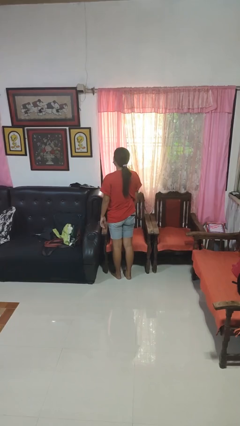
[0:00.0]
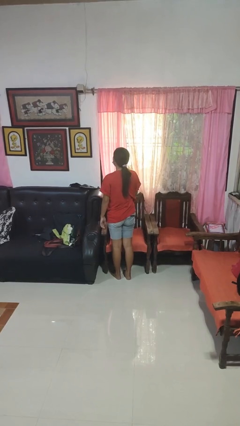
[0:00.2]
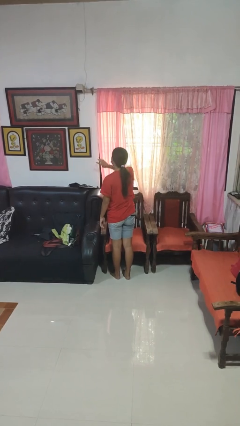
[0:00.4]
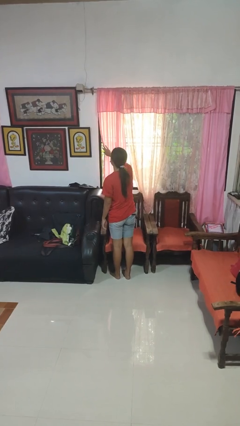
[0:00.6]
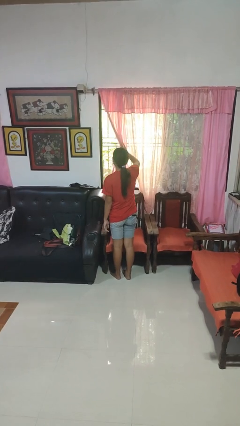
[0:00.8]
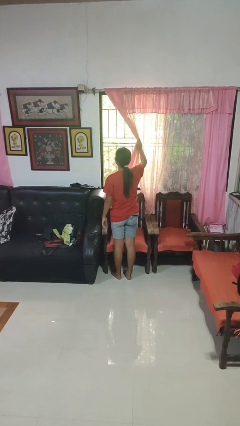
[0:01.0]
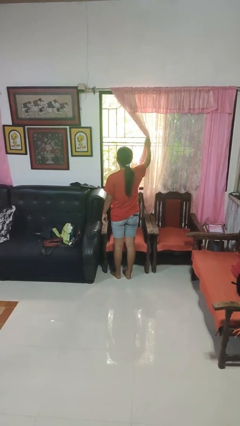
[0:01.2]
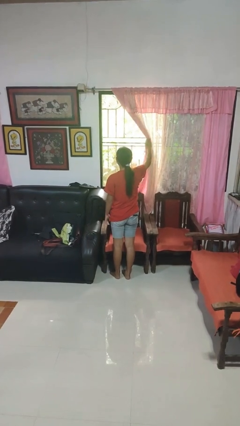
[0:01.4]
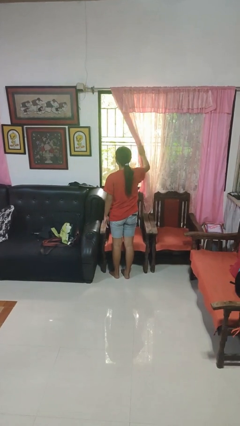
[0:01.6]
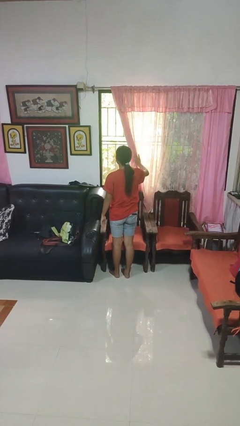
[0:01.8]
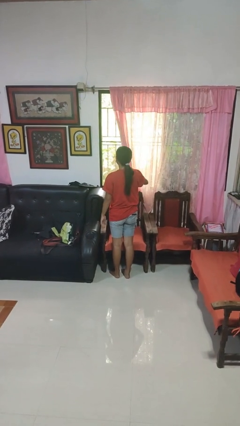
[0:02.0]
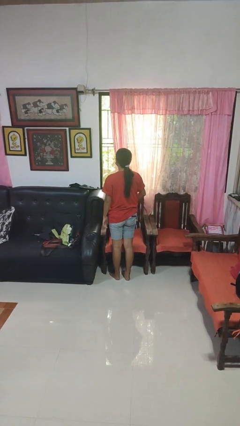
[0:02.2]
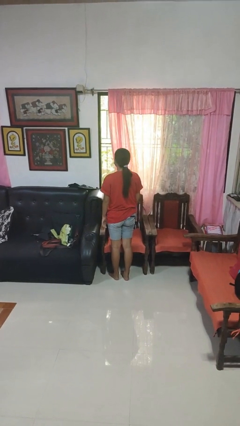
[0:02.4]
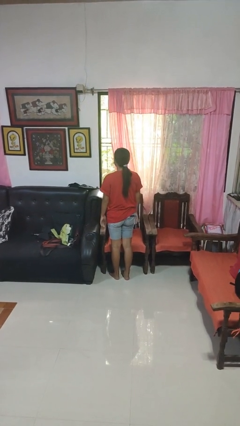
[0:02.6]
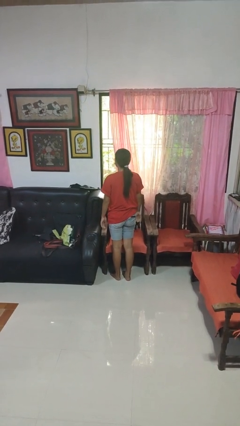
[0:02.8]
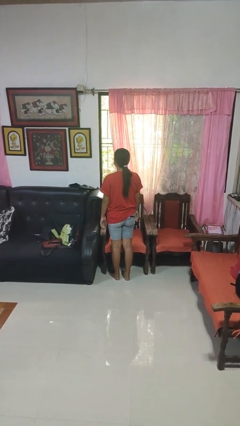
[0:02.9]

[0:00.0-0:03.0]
person opens curtains

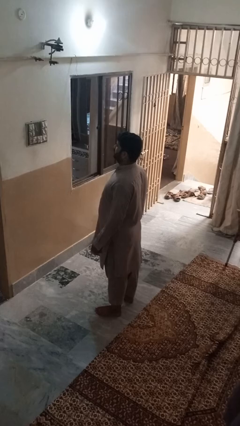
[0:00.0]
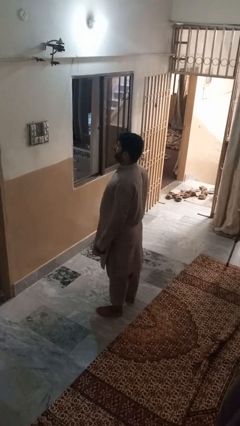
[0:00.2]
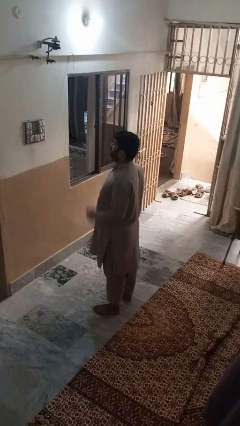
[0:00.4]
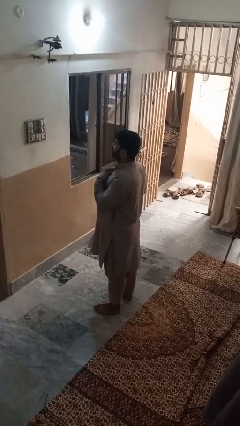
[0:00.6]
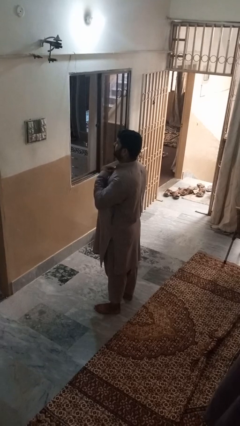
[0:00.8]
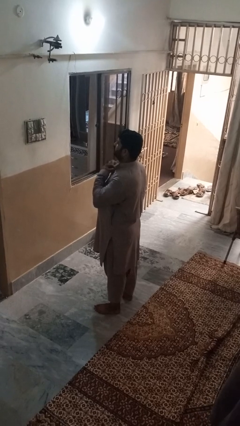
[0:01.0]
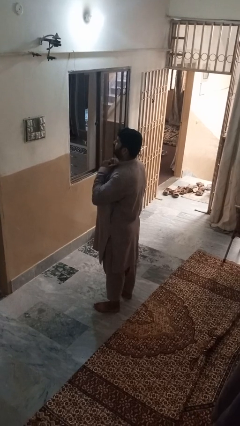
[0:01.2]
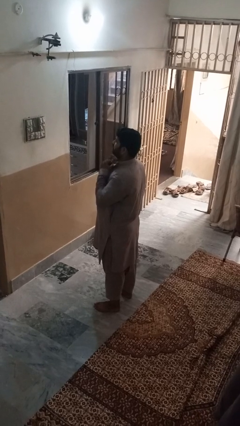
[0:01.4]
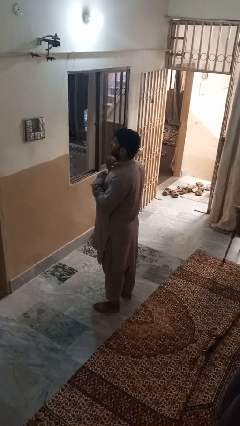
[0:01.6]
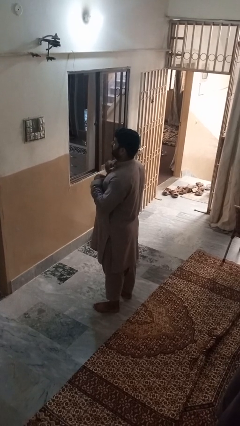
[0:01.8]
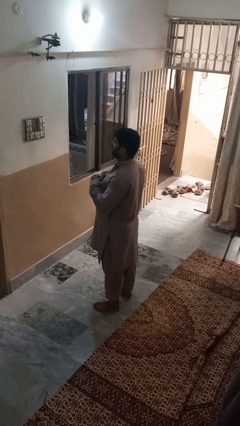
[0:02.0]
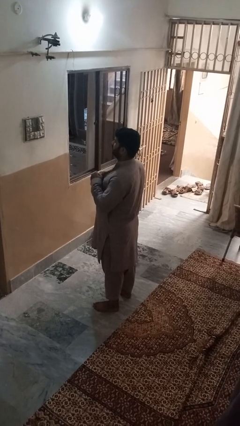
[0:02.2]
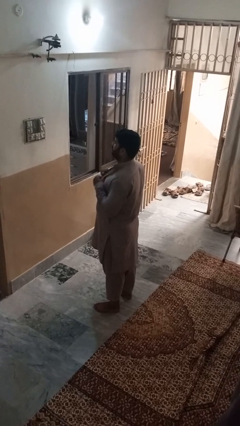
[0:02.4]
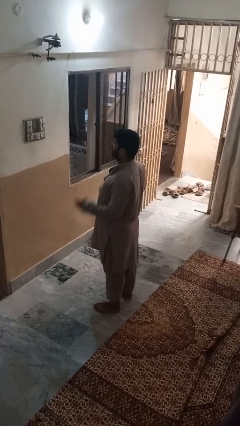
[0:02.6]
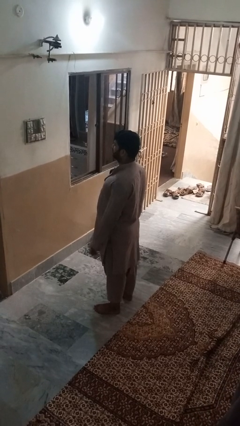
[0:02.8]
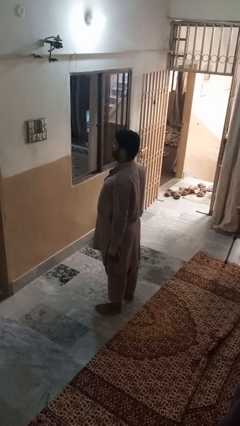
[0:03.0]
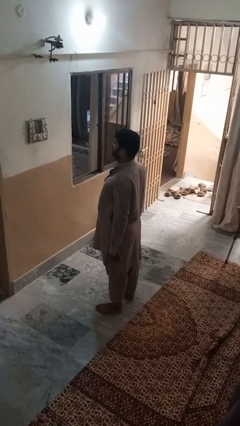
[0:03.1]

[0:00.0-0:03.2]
person unbuttons shirt

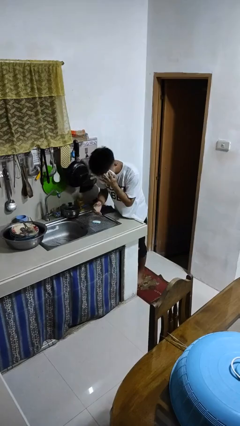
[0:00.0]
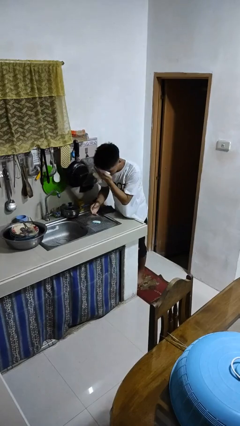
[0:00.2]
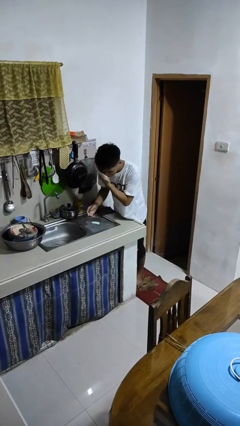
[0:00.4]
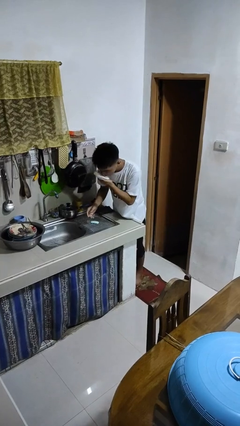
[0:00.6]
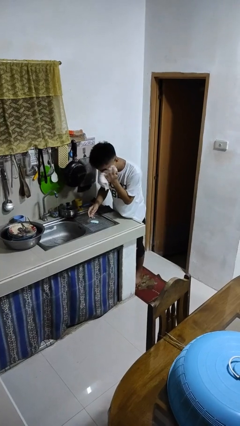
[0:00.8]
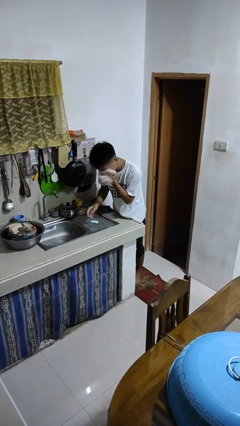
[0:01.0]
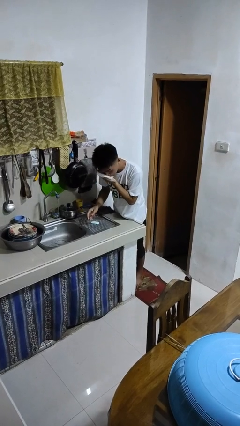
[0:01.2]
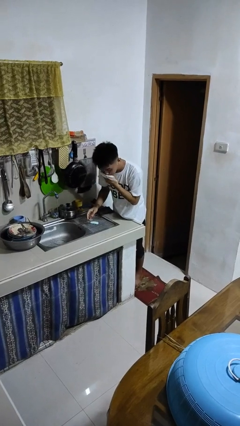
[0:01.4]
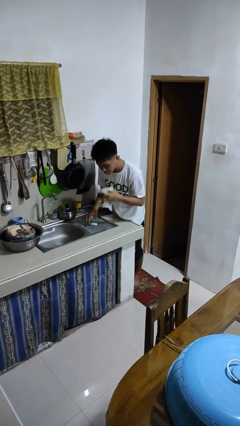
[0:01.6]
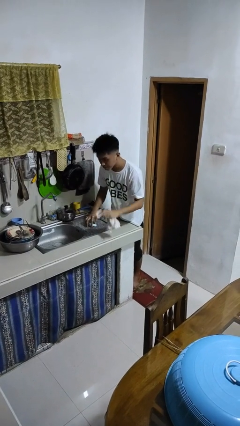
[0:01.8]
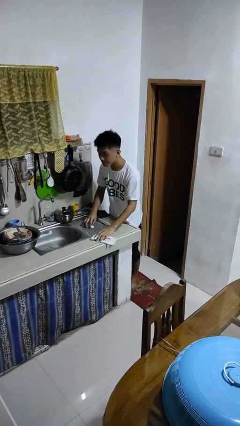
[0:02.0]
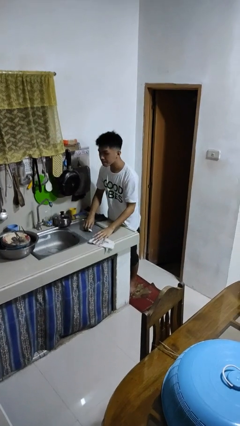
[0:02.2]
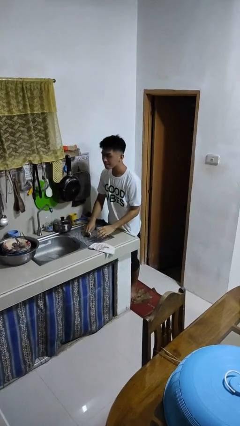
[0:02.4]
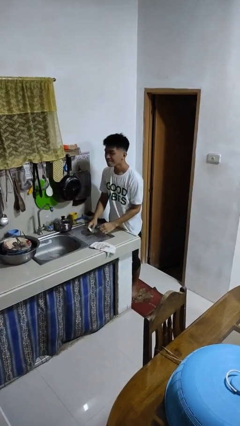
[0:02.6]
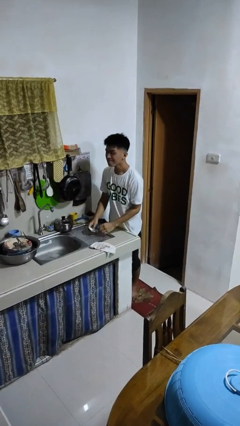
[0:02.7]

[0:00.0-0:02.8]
person dries face with towel

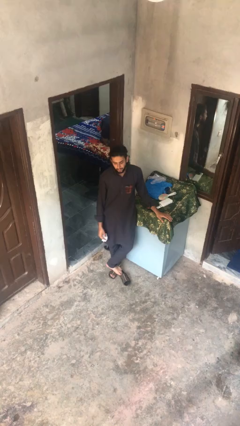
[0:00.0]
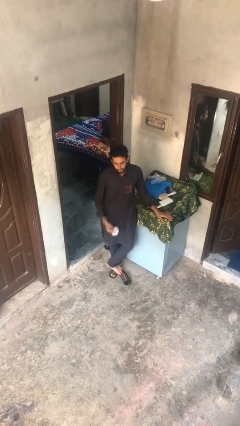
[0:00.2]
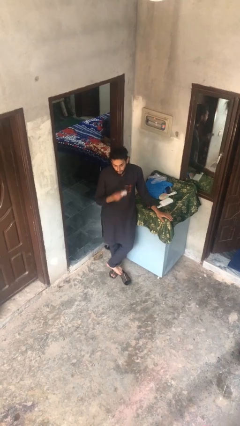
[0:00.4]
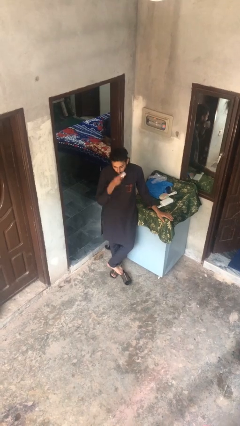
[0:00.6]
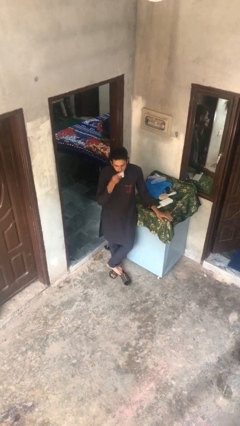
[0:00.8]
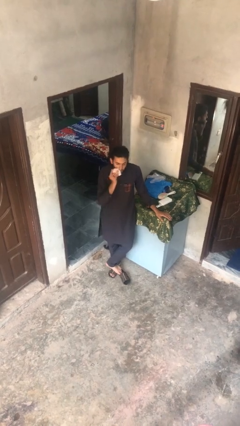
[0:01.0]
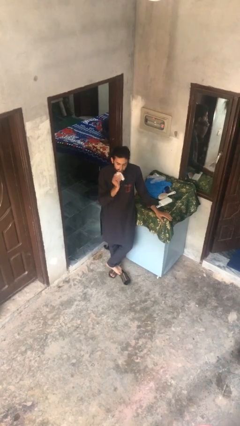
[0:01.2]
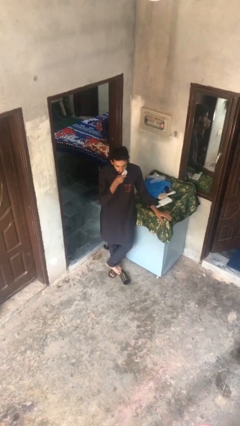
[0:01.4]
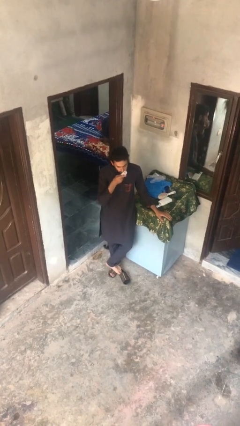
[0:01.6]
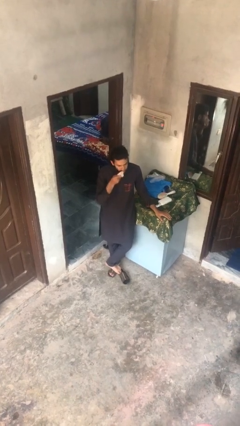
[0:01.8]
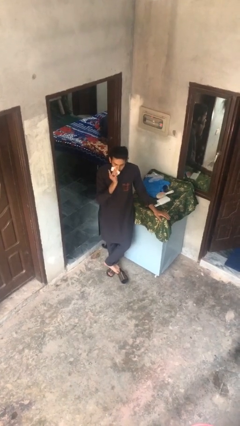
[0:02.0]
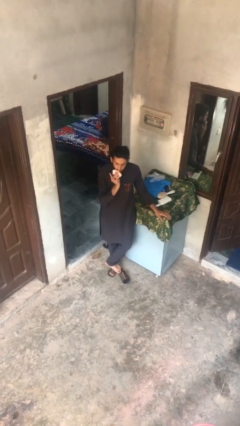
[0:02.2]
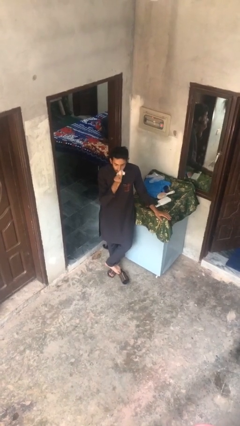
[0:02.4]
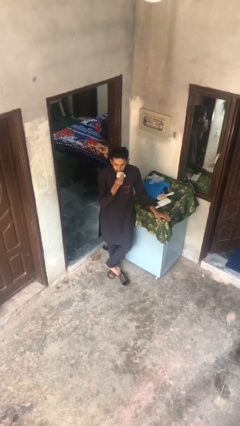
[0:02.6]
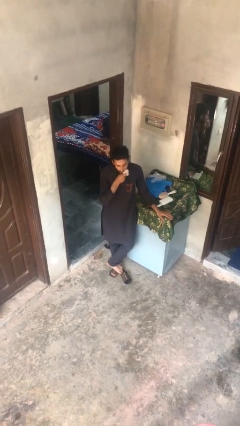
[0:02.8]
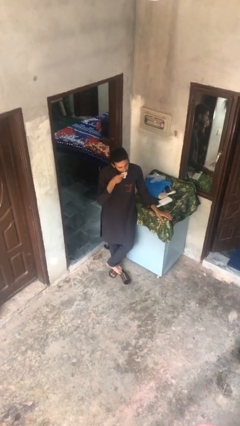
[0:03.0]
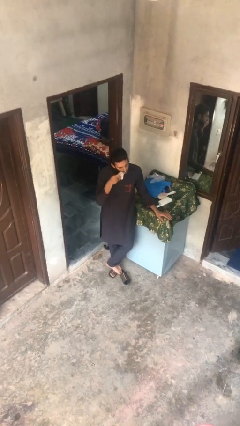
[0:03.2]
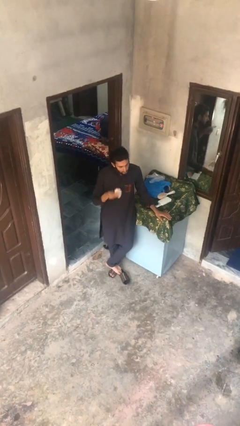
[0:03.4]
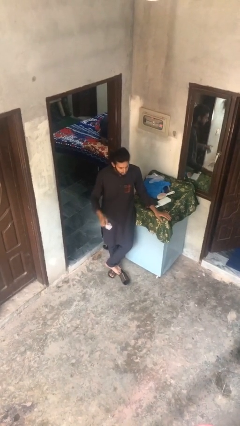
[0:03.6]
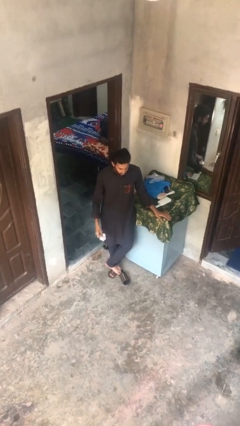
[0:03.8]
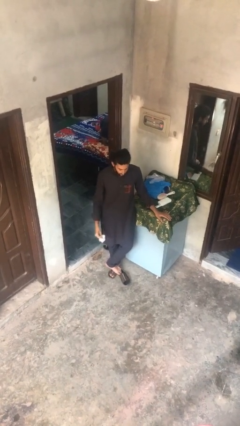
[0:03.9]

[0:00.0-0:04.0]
person wipes mouth with napkin

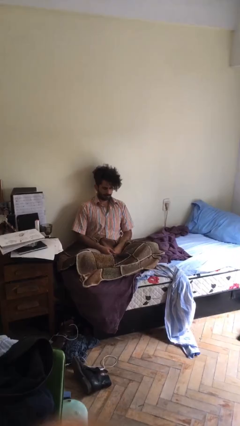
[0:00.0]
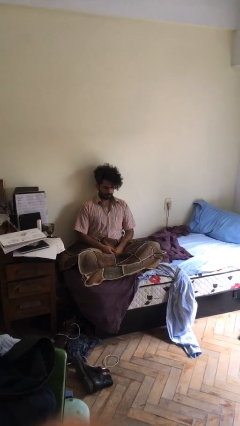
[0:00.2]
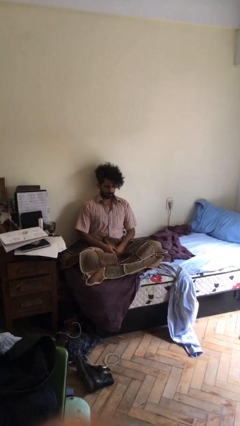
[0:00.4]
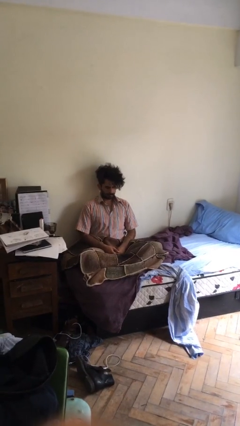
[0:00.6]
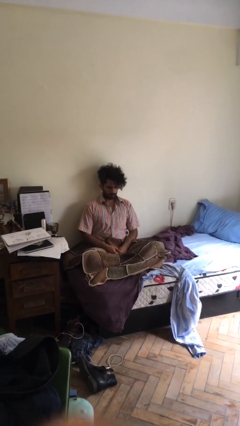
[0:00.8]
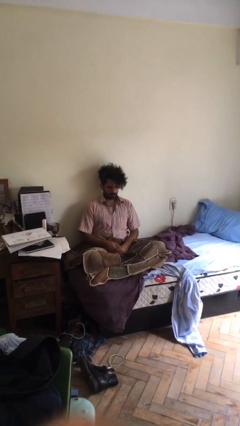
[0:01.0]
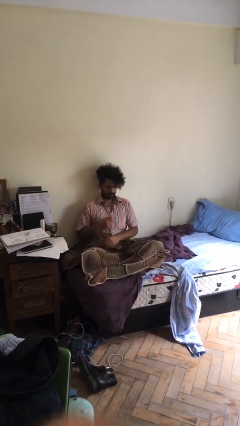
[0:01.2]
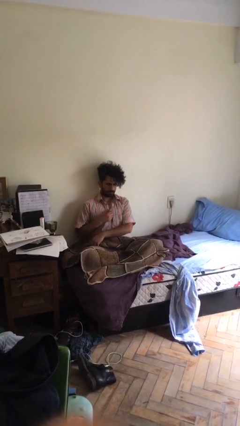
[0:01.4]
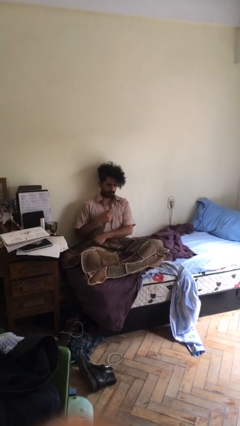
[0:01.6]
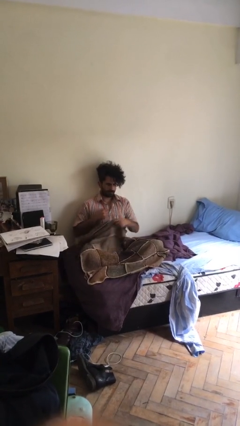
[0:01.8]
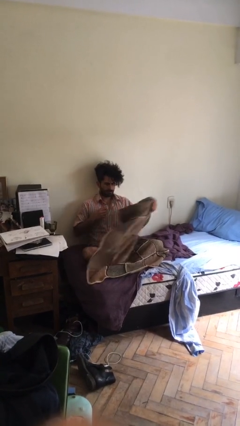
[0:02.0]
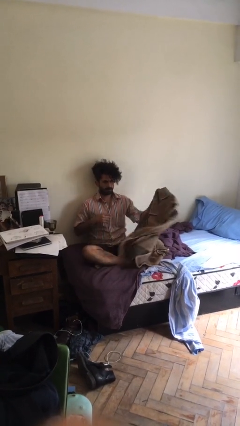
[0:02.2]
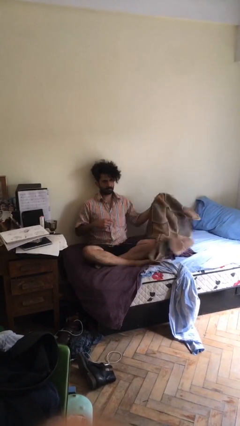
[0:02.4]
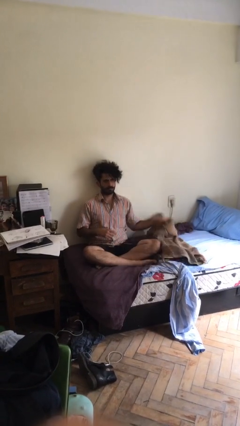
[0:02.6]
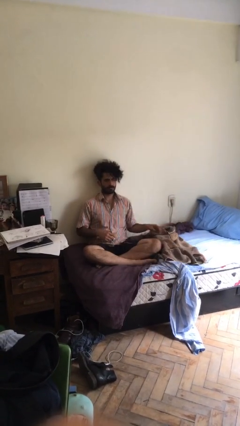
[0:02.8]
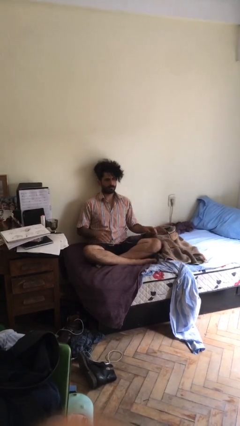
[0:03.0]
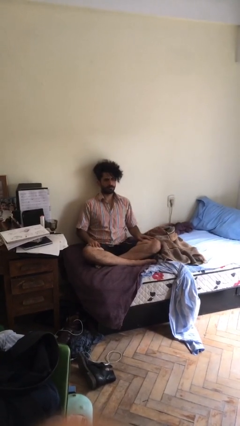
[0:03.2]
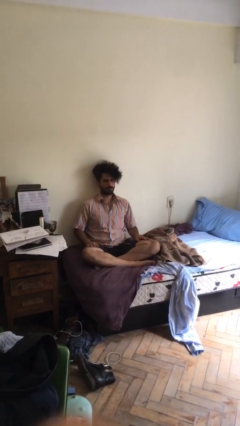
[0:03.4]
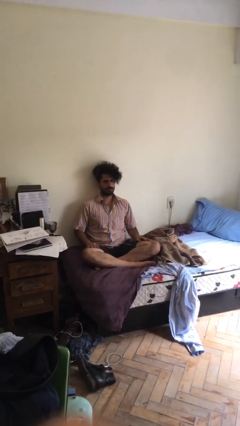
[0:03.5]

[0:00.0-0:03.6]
person uncovers with blanket

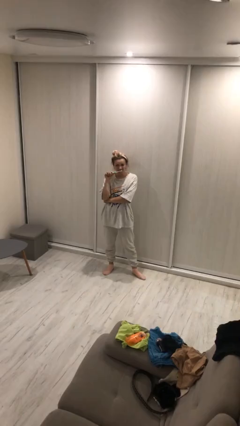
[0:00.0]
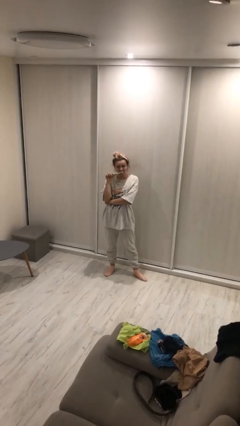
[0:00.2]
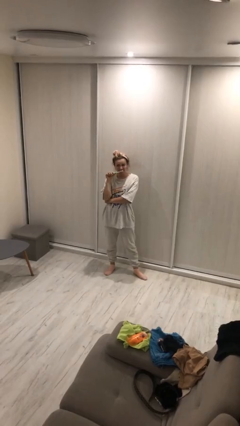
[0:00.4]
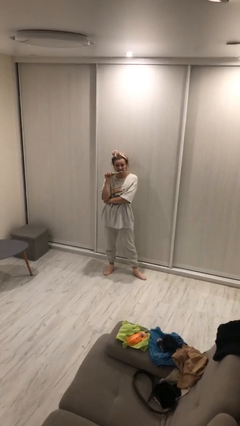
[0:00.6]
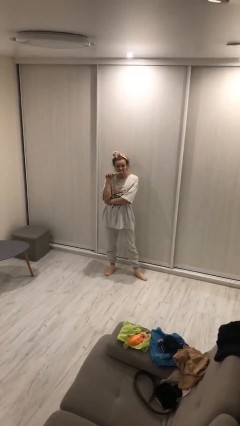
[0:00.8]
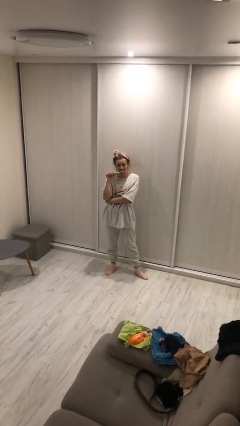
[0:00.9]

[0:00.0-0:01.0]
person brushes teeth
